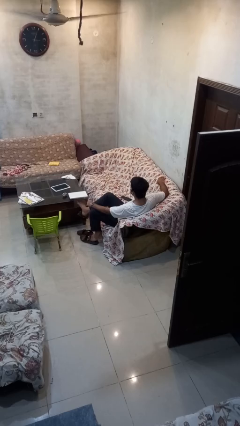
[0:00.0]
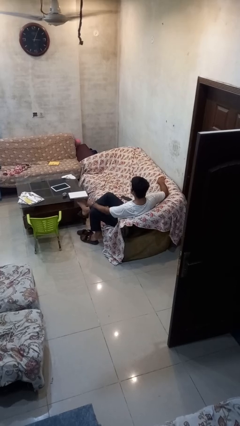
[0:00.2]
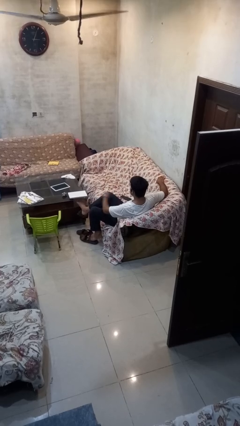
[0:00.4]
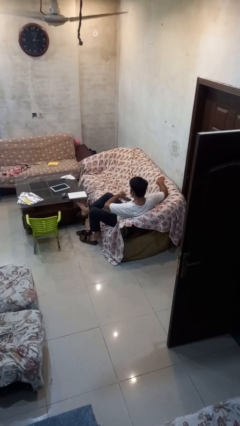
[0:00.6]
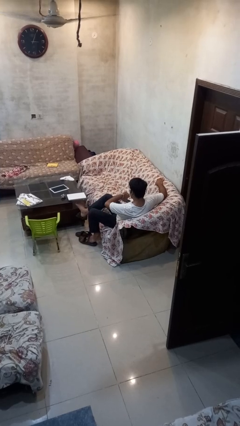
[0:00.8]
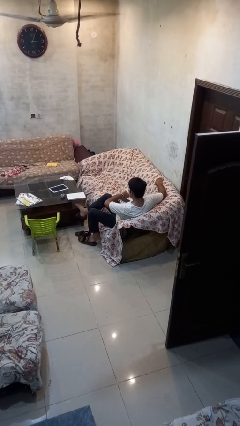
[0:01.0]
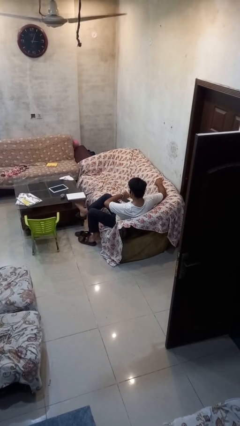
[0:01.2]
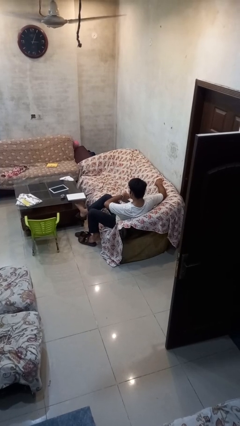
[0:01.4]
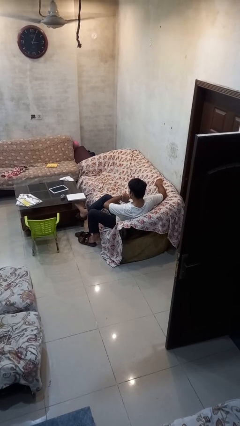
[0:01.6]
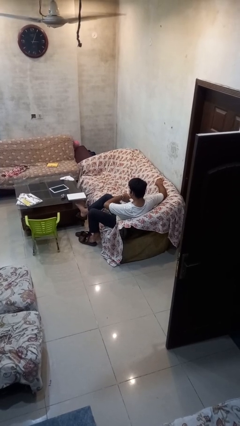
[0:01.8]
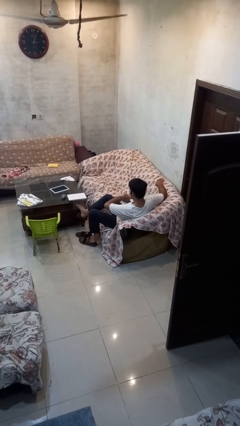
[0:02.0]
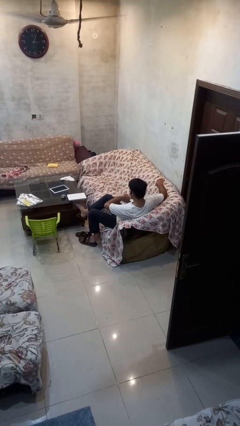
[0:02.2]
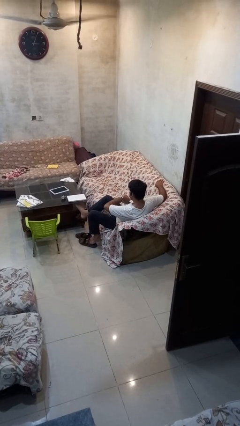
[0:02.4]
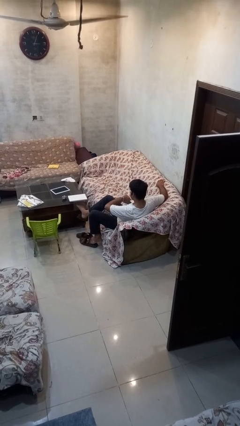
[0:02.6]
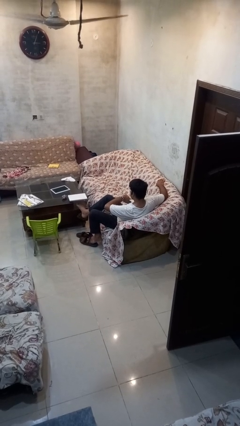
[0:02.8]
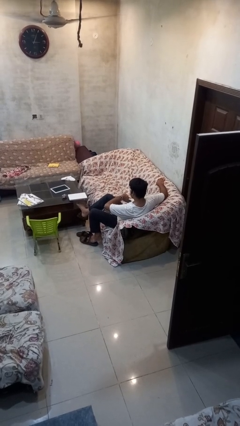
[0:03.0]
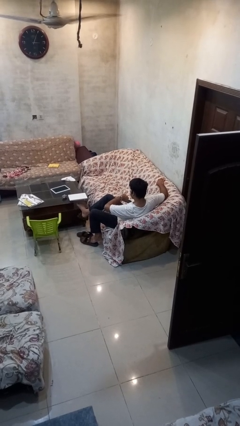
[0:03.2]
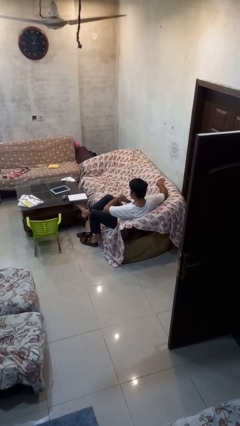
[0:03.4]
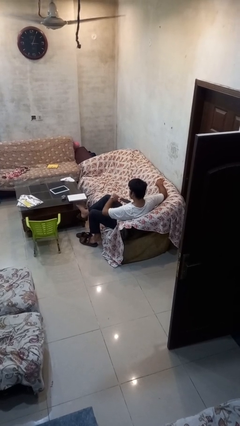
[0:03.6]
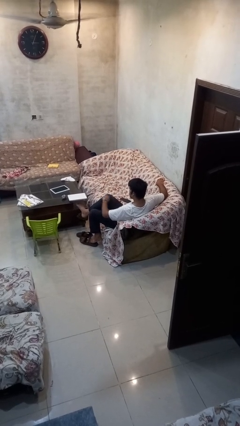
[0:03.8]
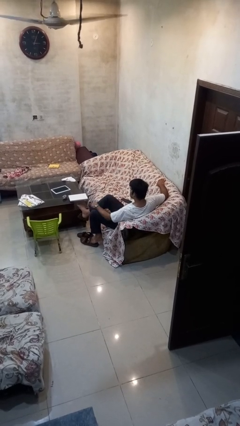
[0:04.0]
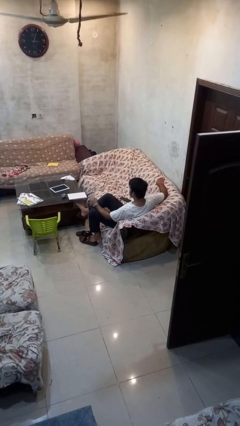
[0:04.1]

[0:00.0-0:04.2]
person looks at wristwatch

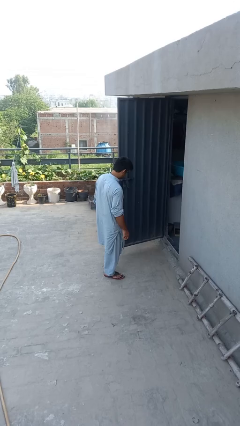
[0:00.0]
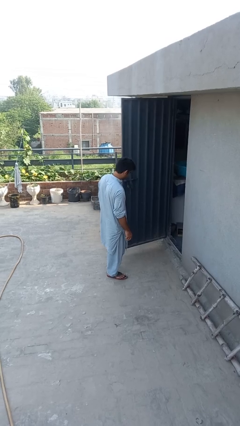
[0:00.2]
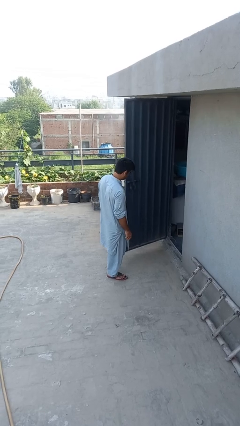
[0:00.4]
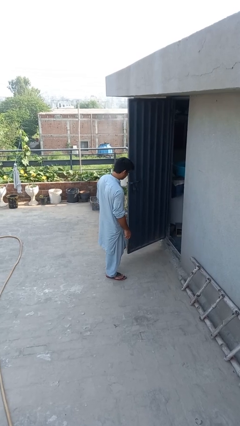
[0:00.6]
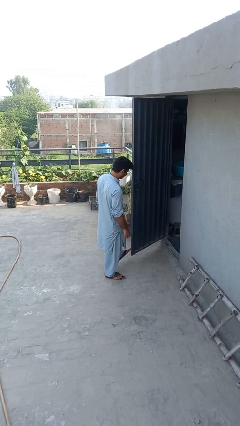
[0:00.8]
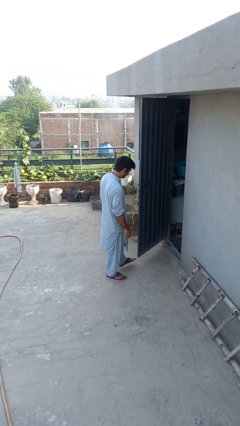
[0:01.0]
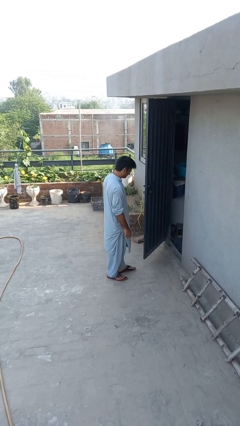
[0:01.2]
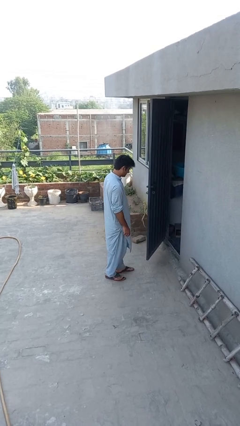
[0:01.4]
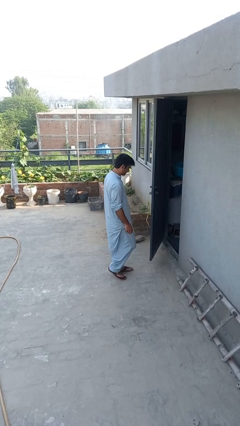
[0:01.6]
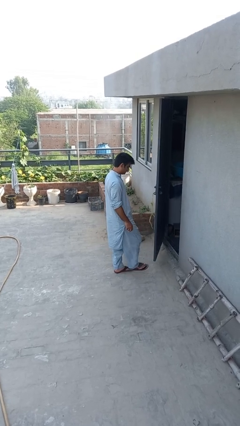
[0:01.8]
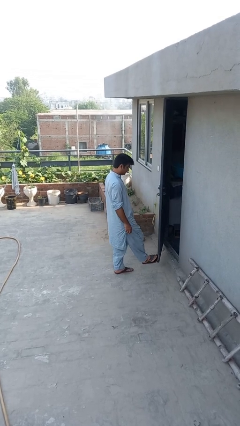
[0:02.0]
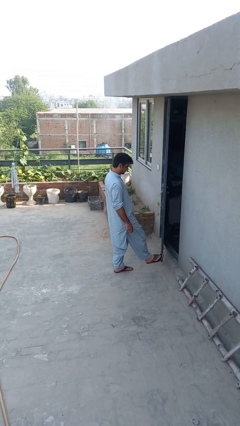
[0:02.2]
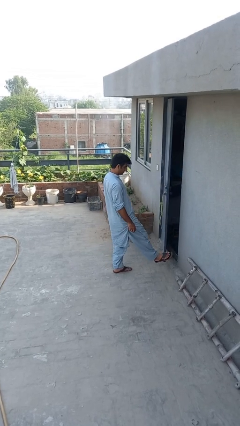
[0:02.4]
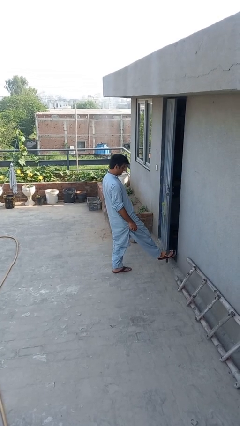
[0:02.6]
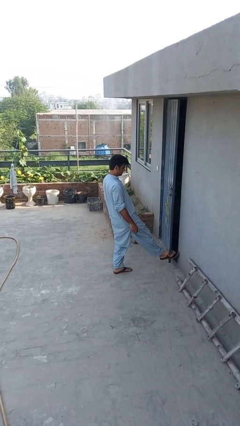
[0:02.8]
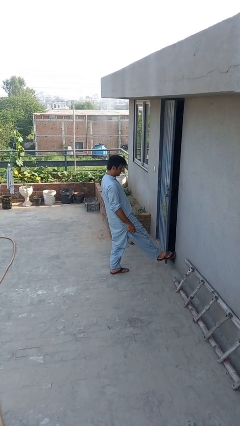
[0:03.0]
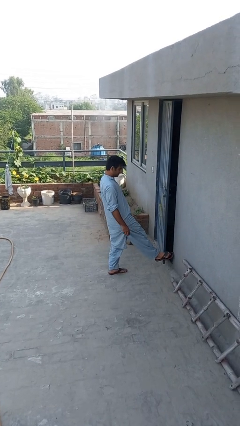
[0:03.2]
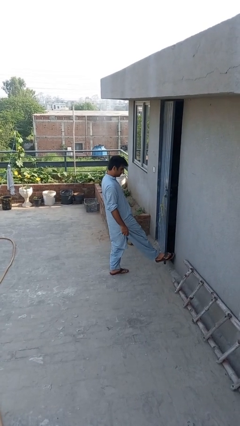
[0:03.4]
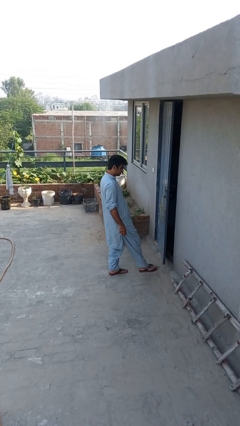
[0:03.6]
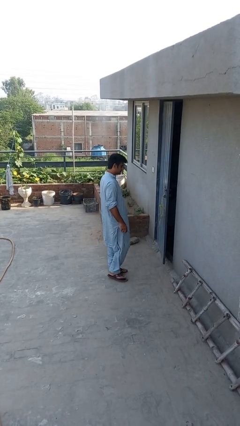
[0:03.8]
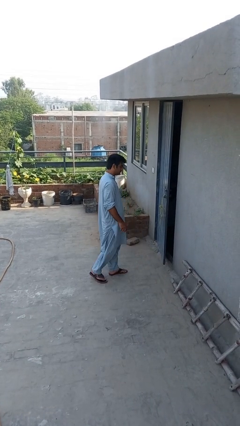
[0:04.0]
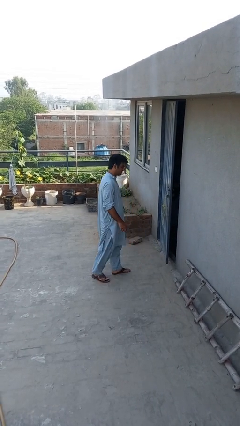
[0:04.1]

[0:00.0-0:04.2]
person closes door with foot

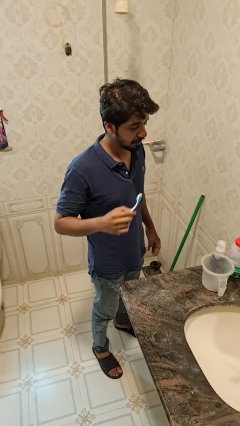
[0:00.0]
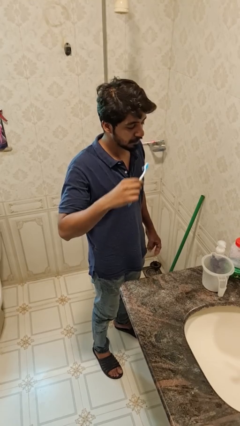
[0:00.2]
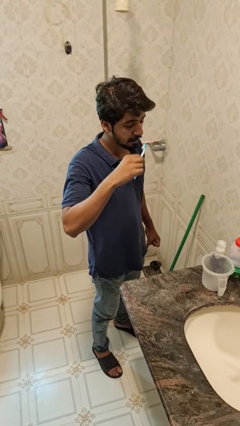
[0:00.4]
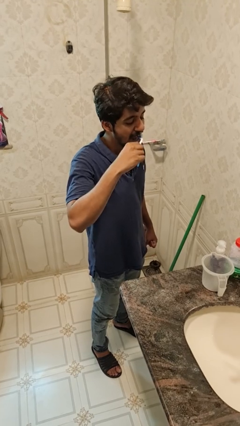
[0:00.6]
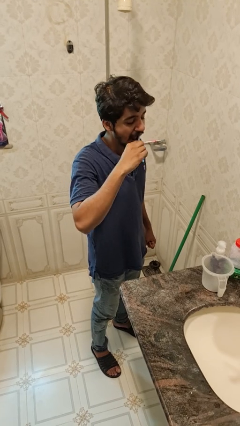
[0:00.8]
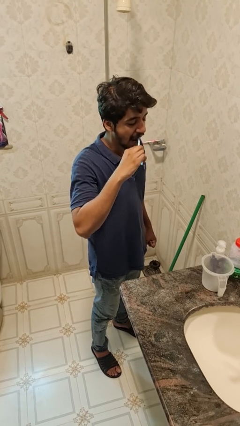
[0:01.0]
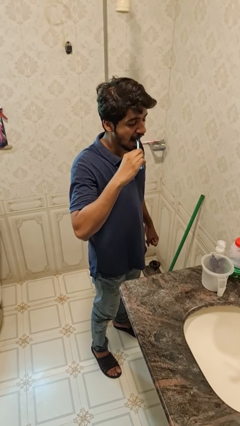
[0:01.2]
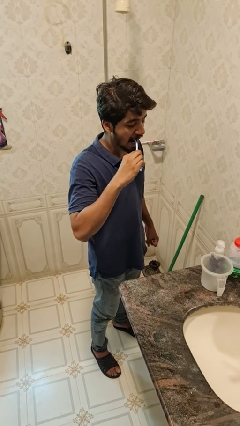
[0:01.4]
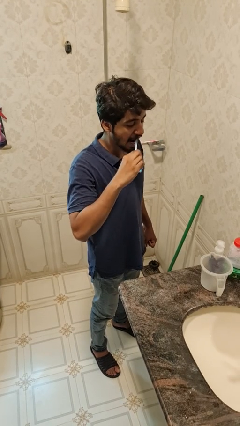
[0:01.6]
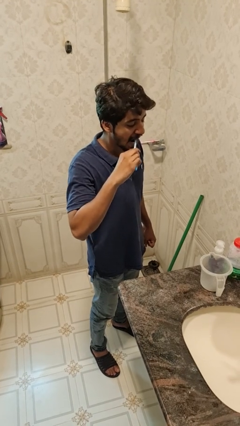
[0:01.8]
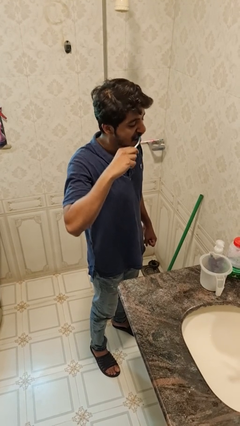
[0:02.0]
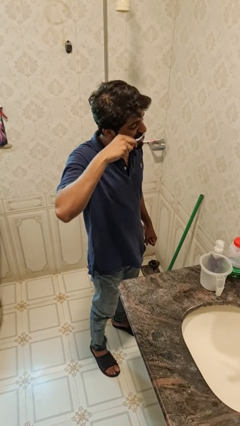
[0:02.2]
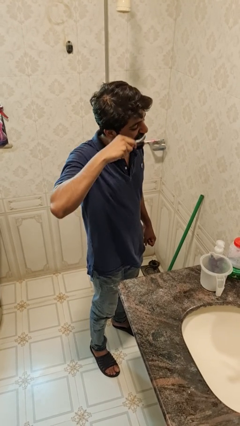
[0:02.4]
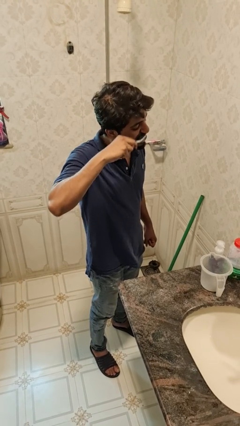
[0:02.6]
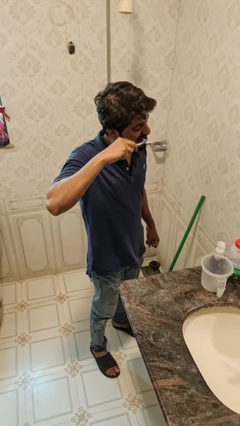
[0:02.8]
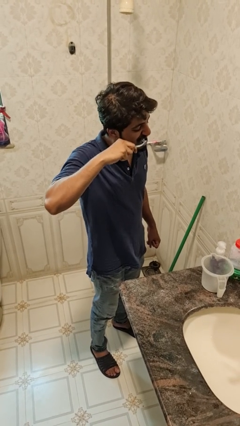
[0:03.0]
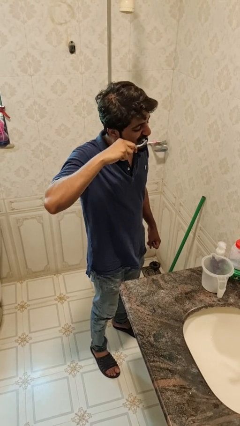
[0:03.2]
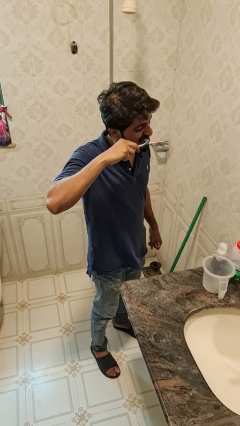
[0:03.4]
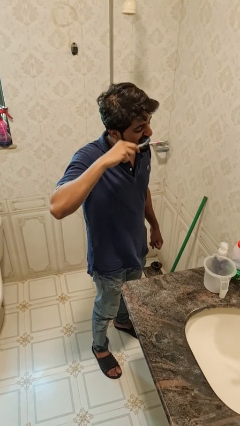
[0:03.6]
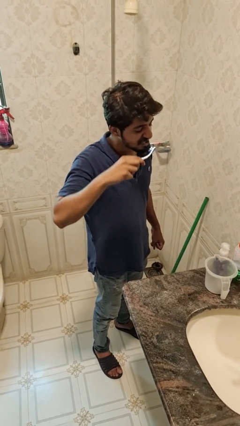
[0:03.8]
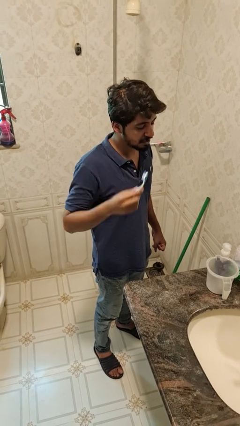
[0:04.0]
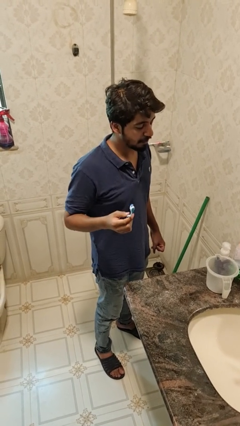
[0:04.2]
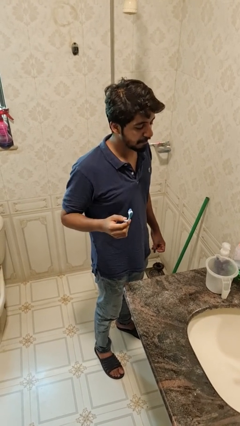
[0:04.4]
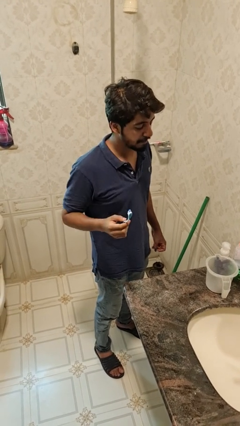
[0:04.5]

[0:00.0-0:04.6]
person brushes teeth

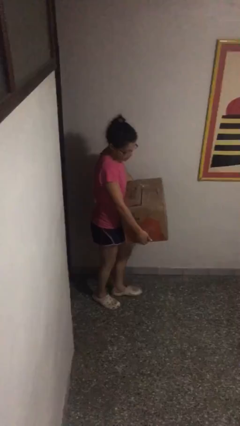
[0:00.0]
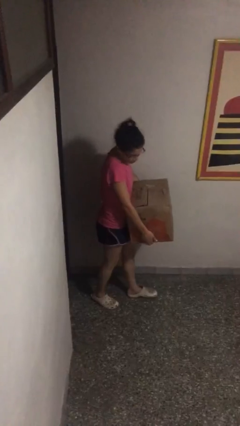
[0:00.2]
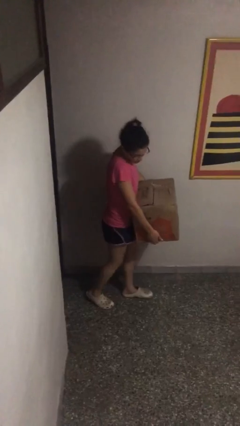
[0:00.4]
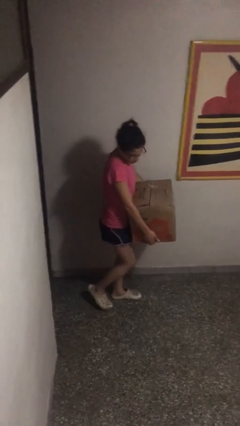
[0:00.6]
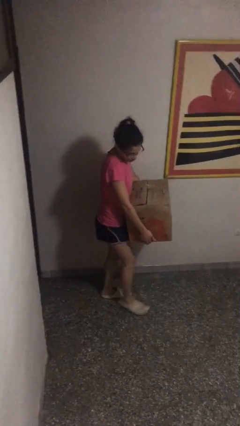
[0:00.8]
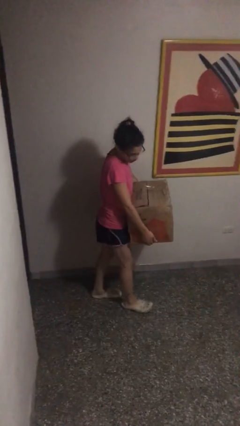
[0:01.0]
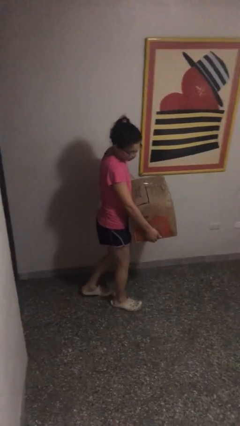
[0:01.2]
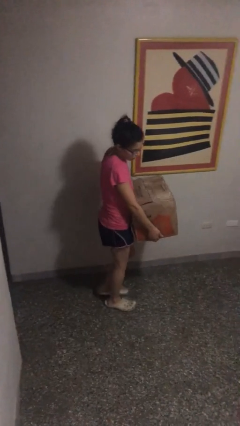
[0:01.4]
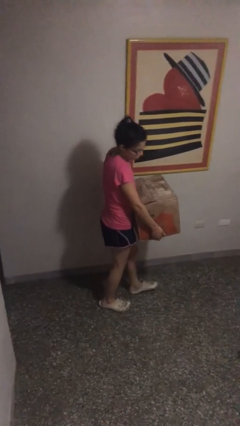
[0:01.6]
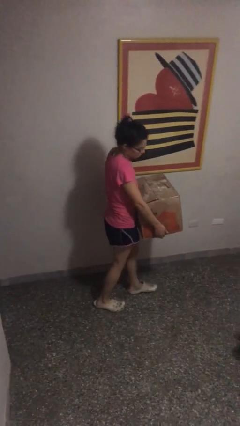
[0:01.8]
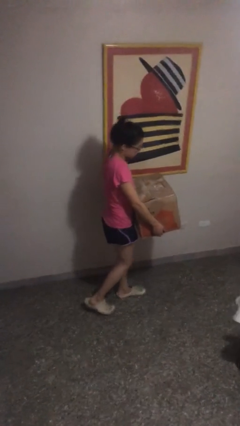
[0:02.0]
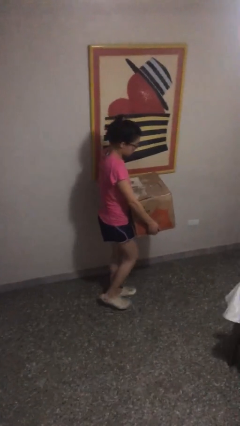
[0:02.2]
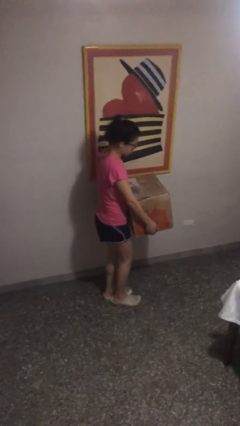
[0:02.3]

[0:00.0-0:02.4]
person carries heavy object

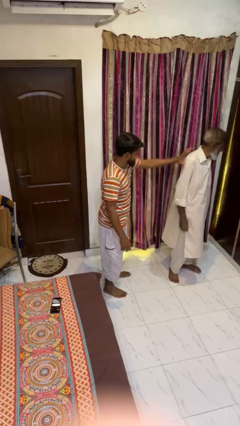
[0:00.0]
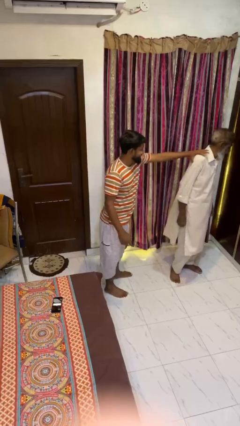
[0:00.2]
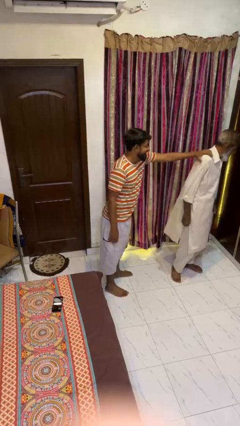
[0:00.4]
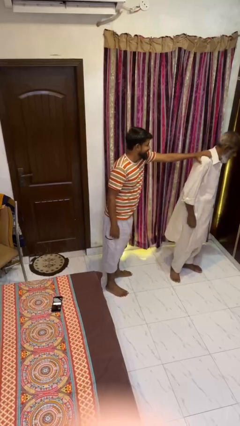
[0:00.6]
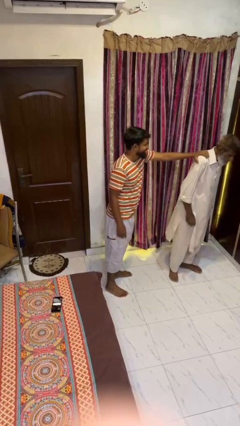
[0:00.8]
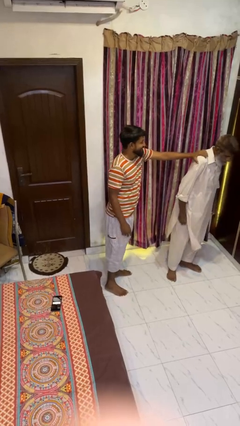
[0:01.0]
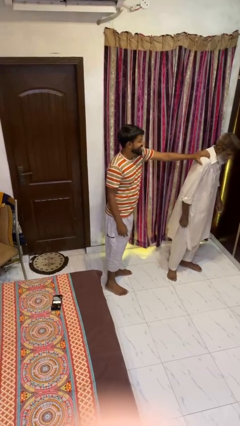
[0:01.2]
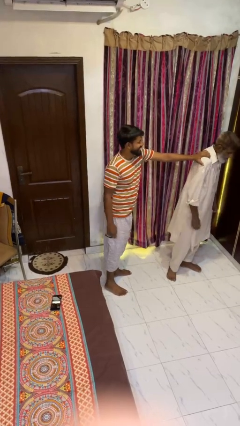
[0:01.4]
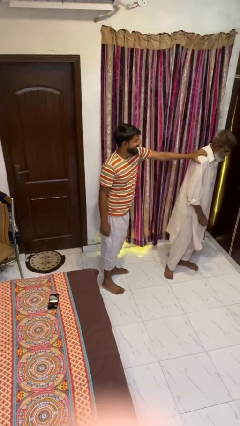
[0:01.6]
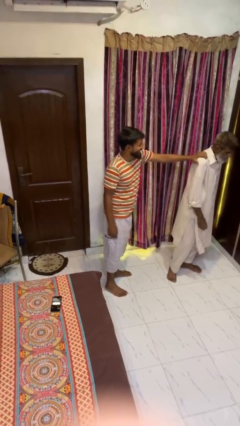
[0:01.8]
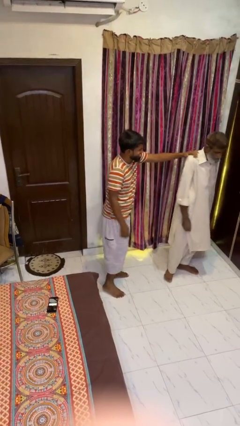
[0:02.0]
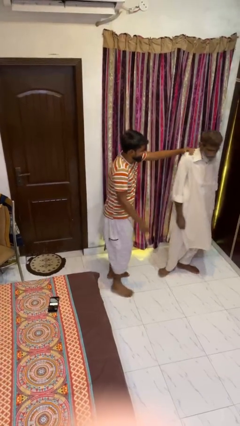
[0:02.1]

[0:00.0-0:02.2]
person grabs person by shoulder
